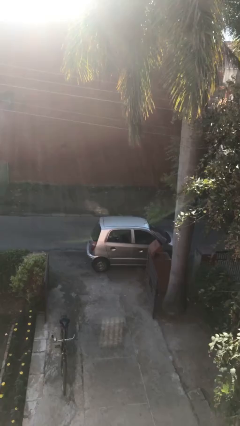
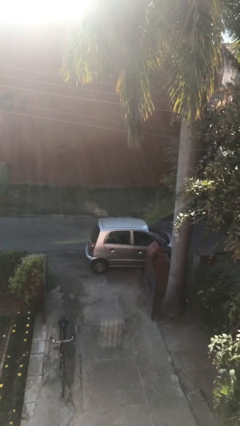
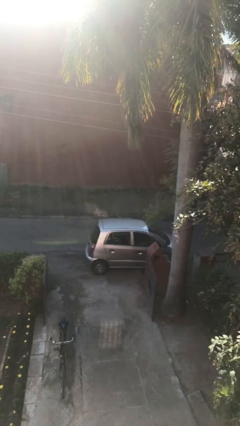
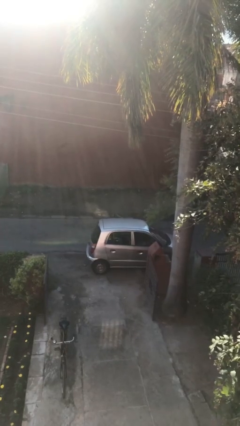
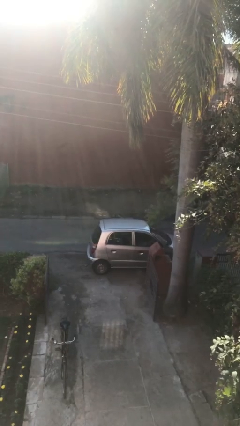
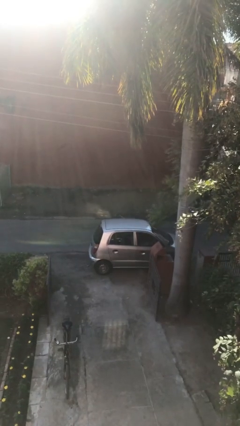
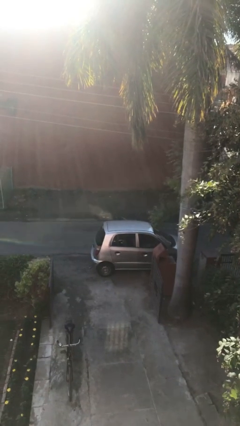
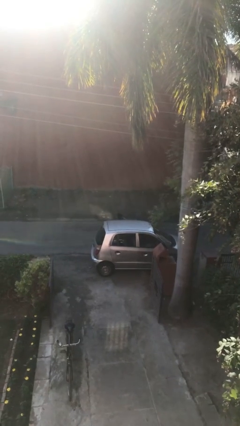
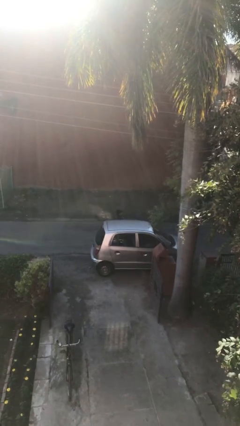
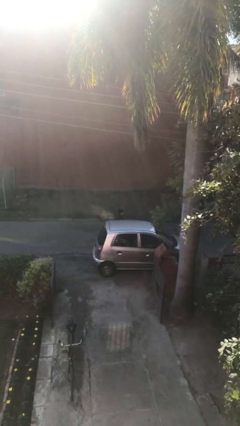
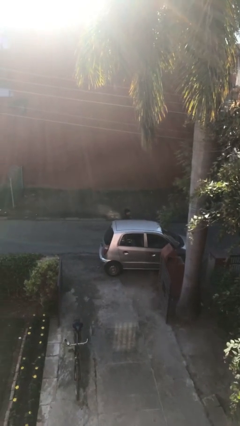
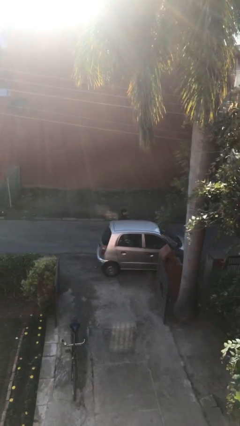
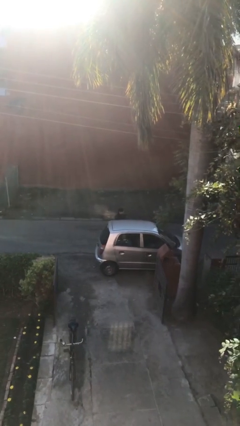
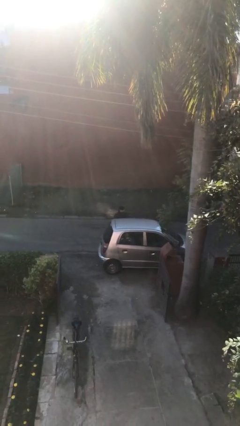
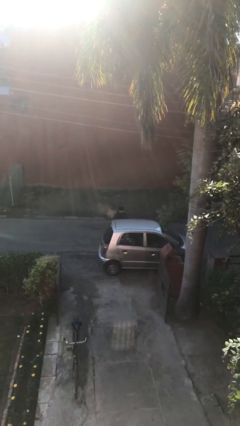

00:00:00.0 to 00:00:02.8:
person exits car

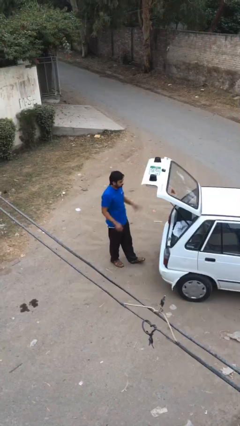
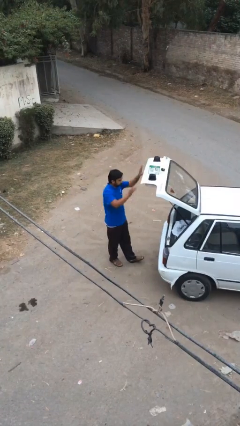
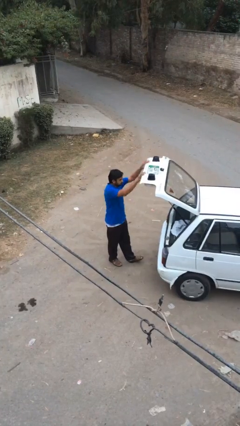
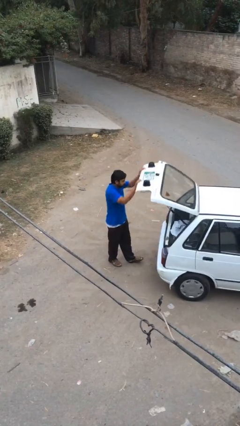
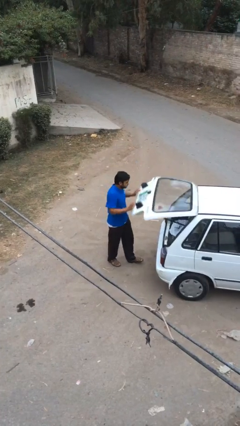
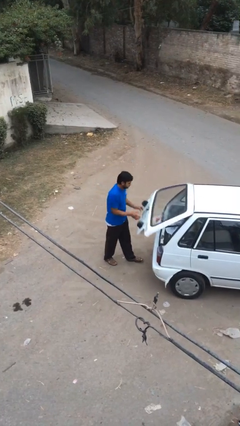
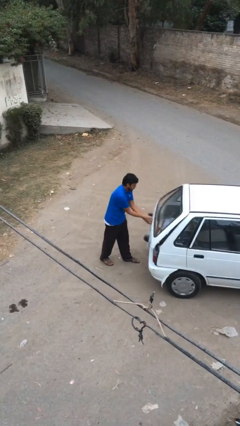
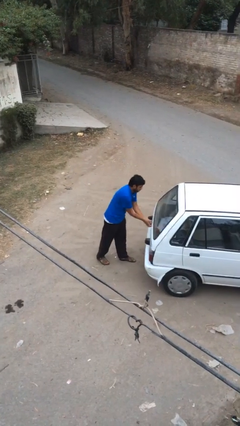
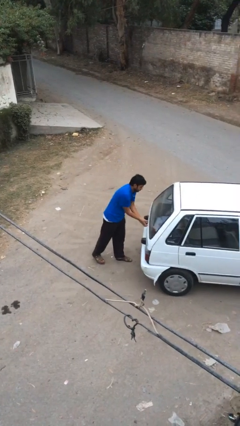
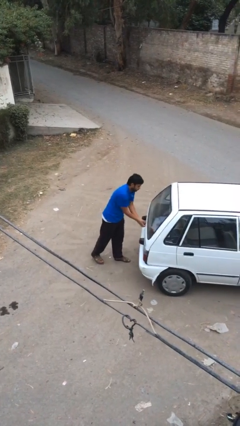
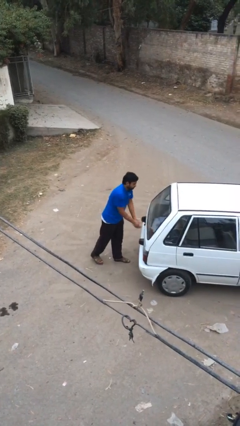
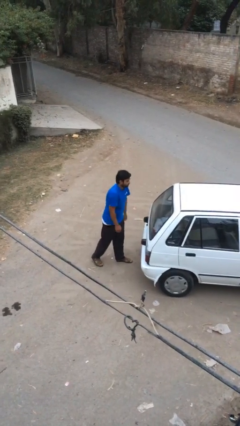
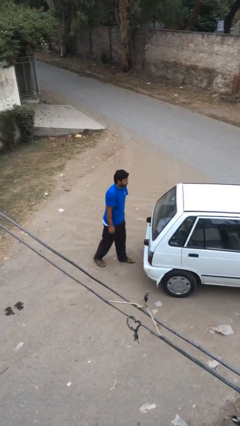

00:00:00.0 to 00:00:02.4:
person closes car trunk

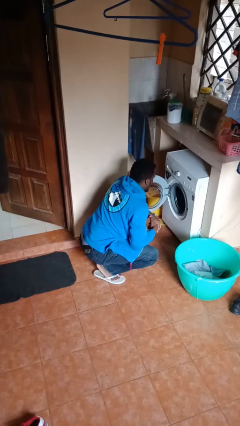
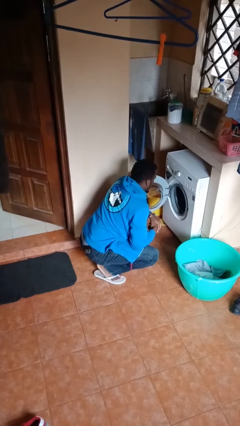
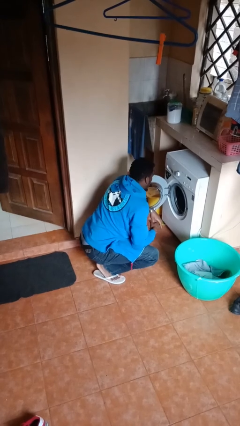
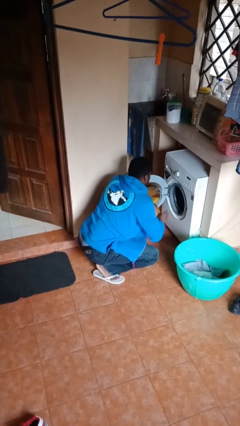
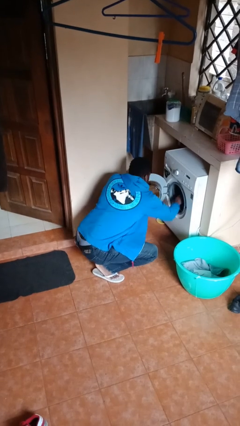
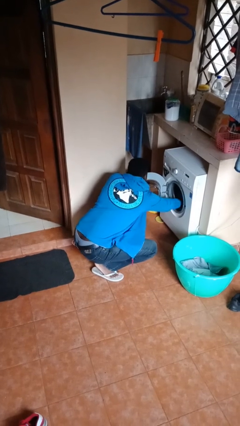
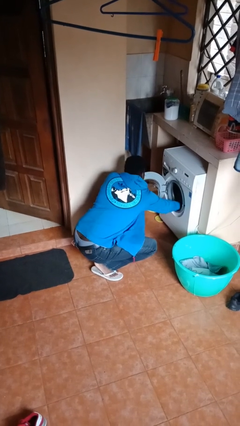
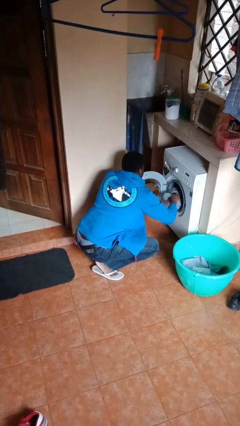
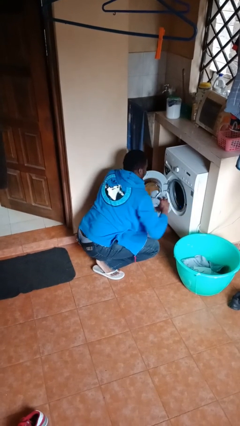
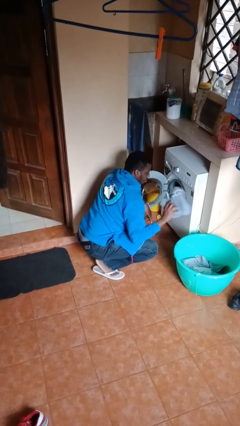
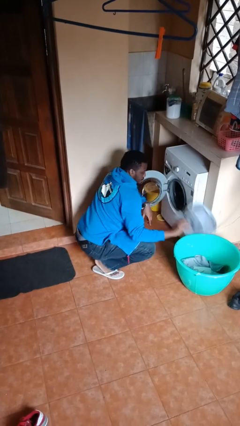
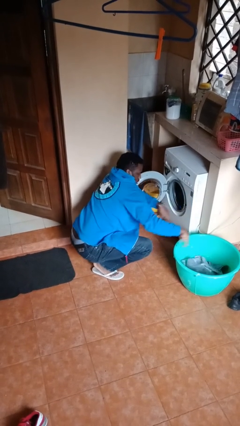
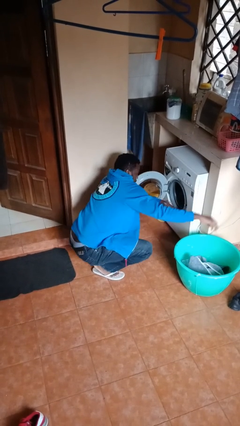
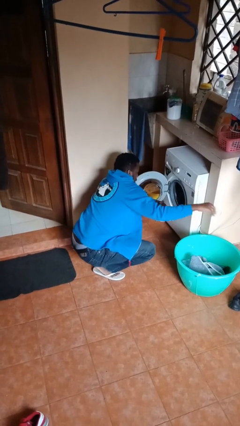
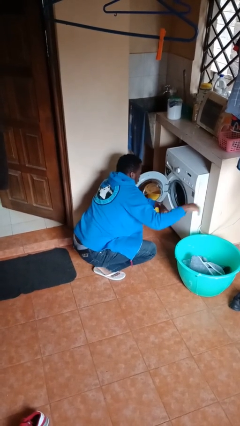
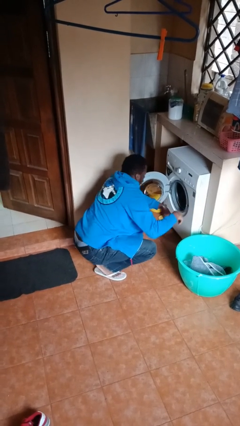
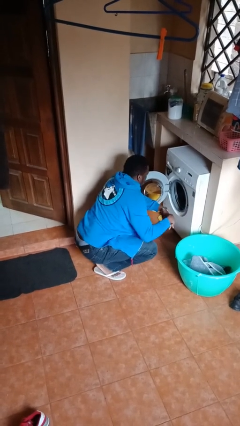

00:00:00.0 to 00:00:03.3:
person loads clotheswasher

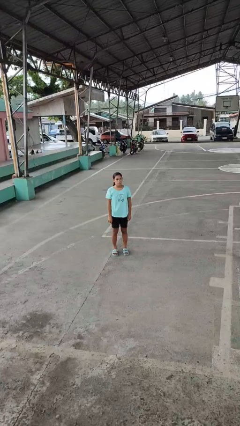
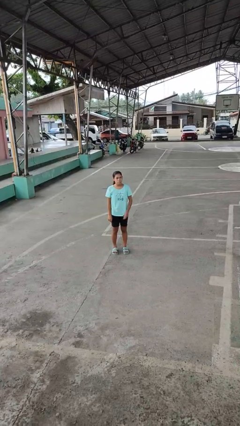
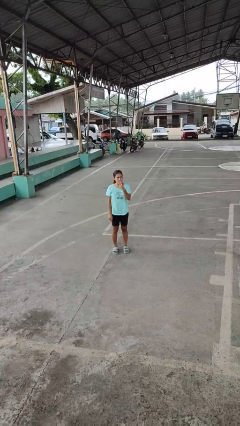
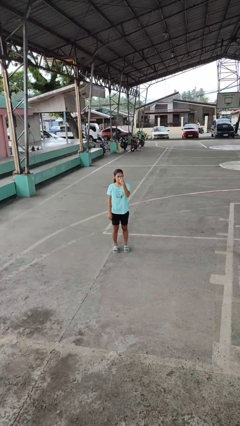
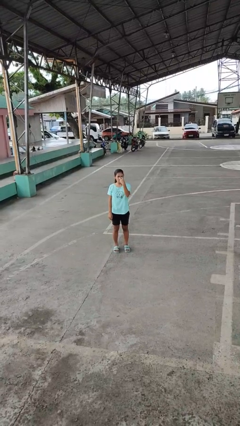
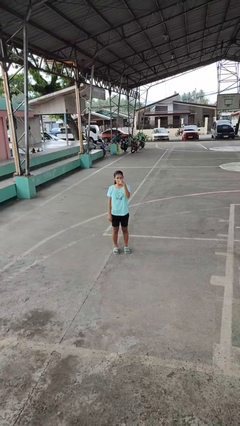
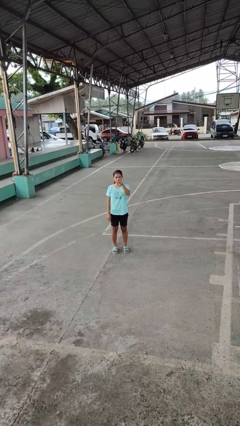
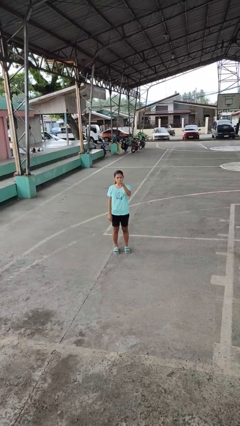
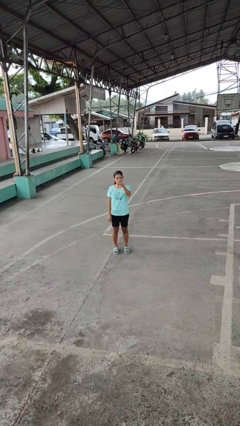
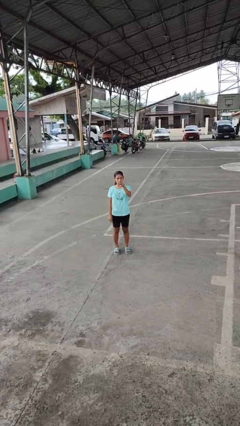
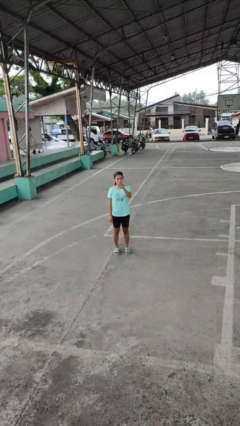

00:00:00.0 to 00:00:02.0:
person gestures watch closely

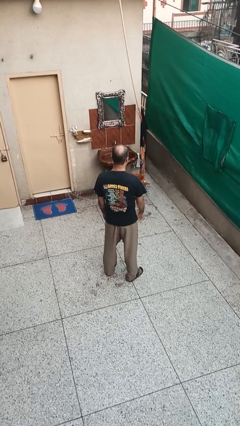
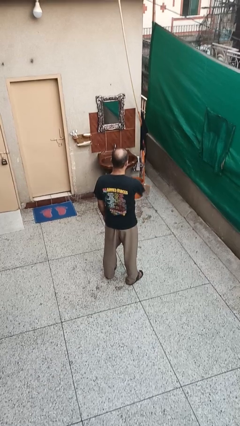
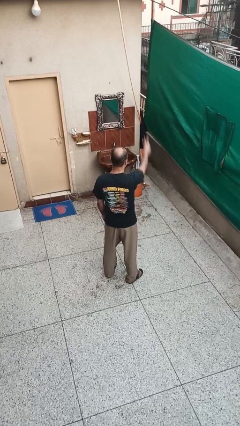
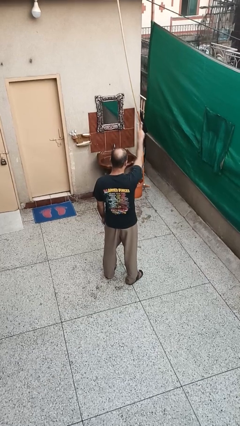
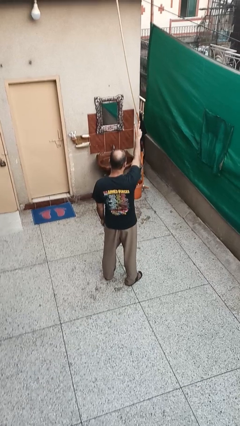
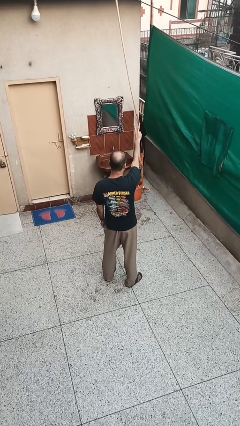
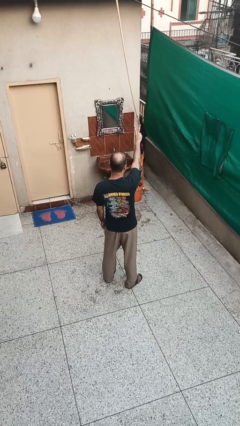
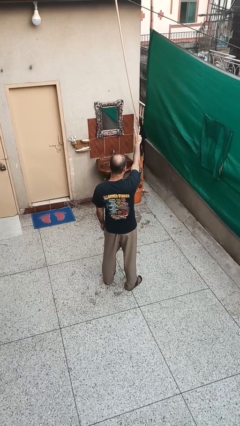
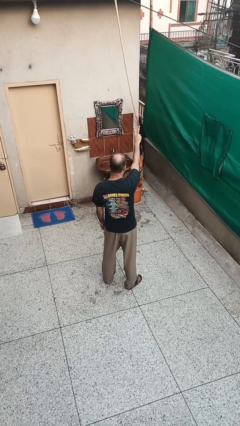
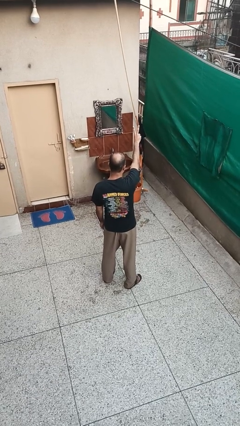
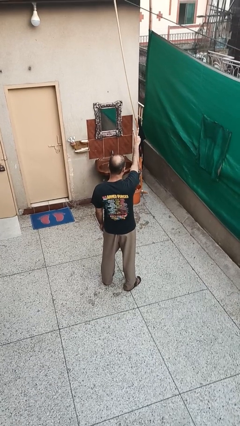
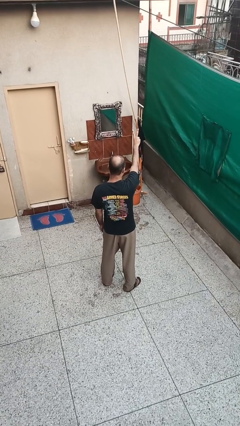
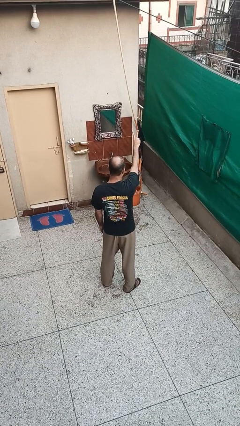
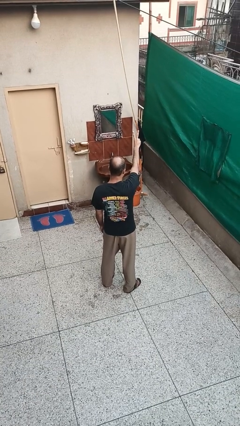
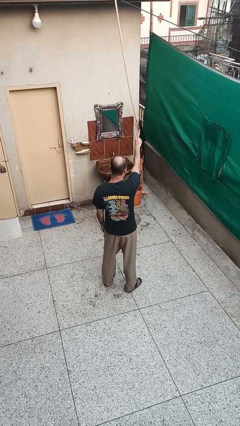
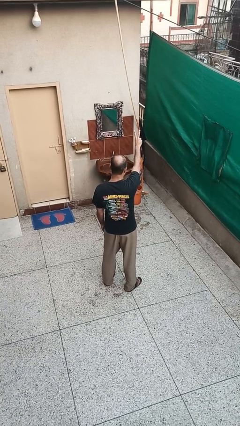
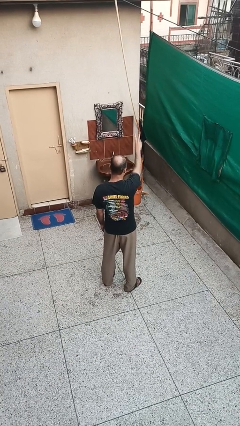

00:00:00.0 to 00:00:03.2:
person gestures peace

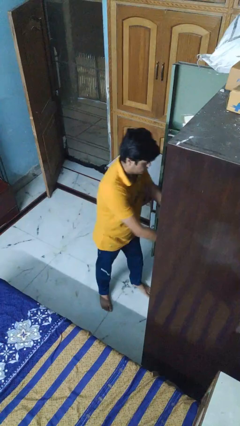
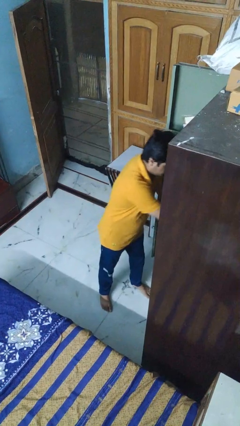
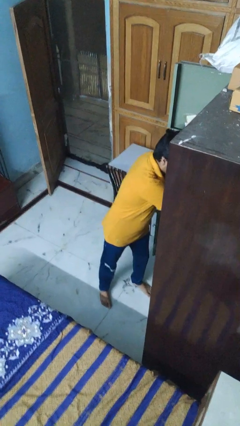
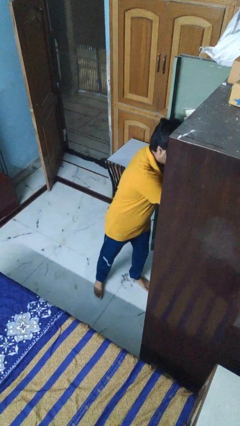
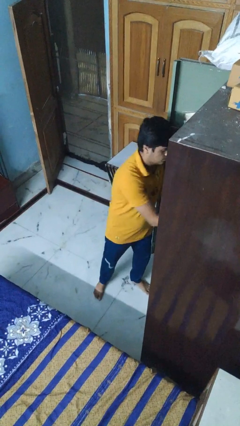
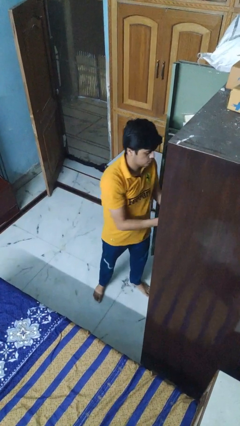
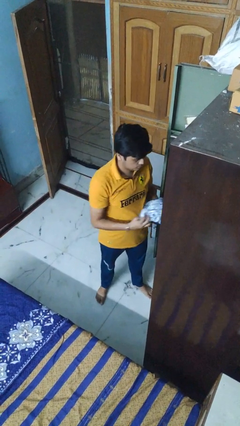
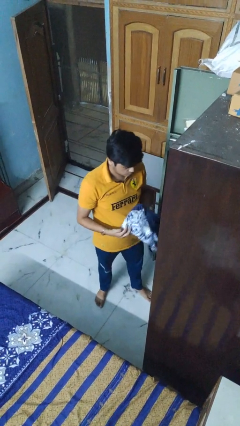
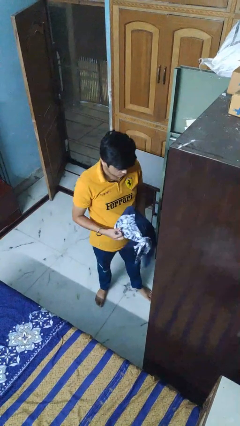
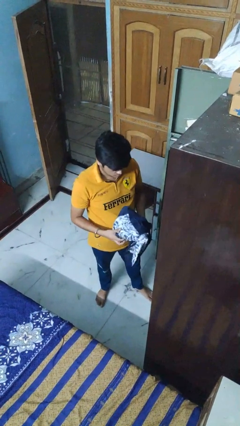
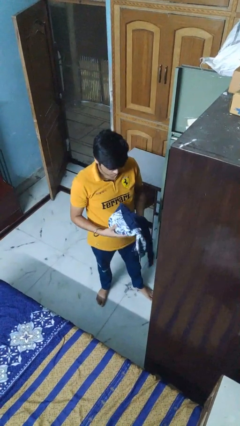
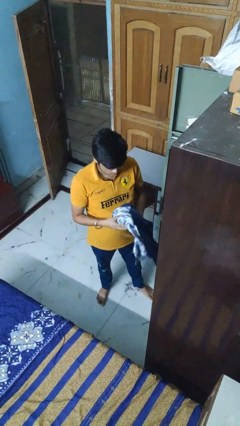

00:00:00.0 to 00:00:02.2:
person takes clothes from dresser

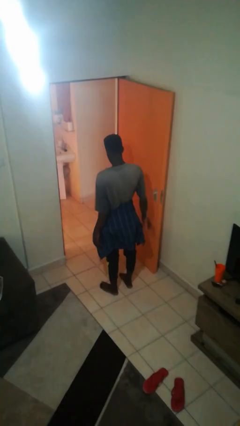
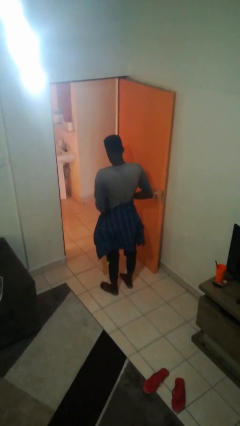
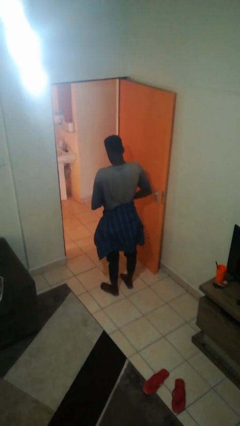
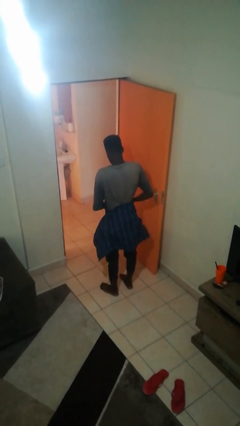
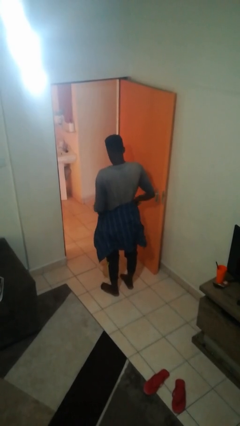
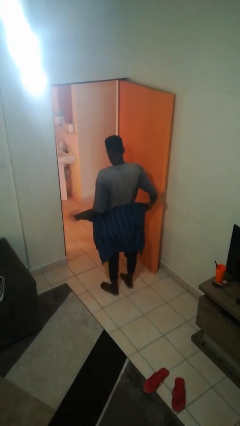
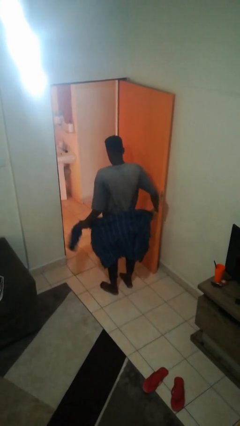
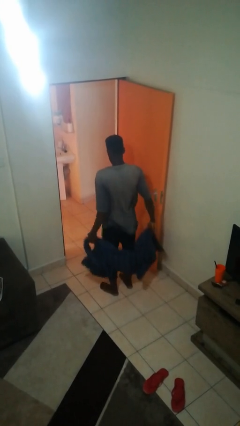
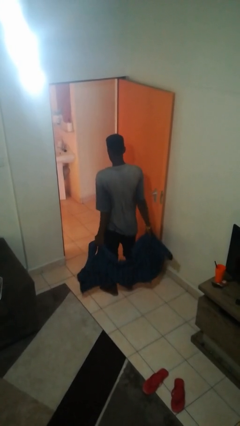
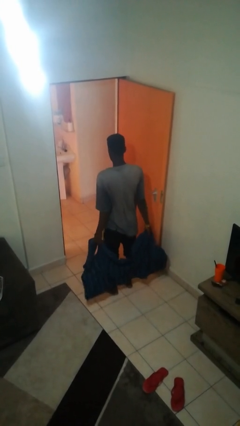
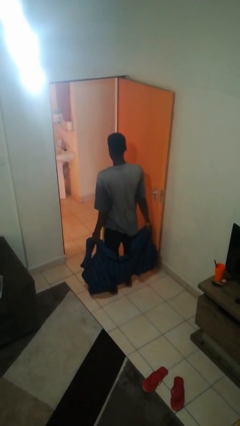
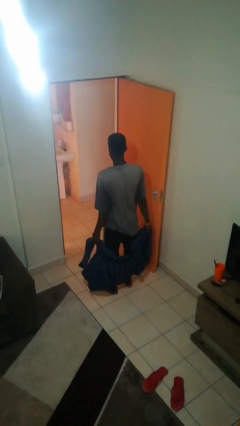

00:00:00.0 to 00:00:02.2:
person unties jacket around waist
